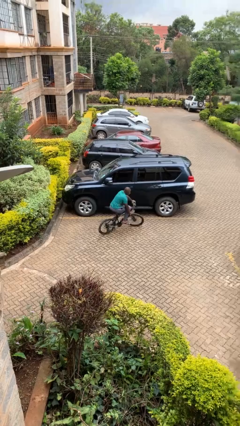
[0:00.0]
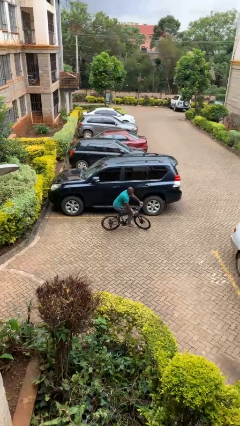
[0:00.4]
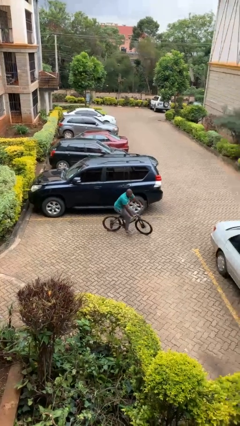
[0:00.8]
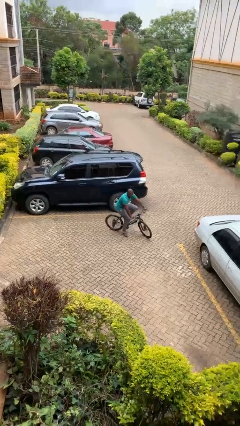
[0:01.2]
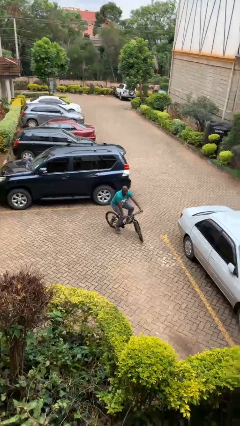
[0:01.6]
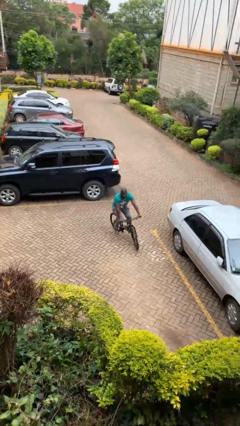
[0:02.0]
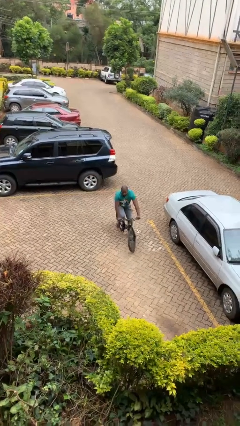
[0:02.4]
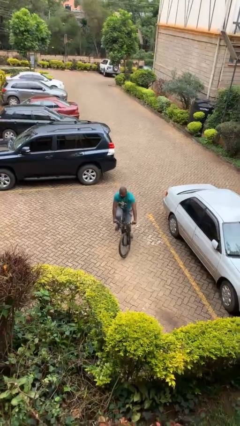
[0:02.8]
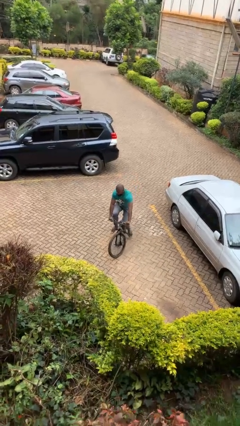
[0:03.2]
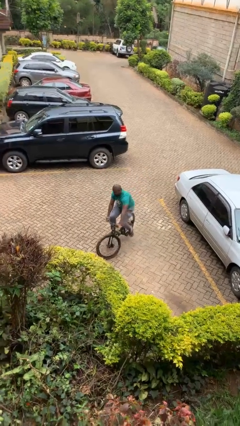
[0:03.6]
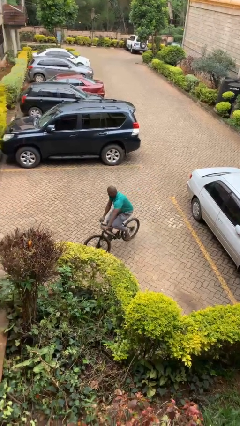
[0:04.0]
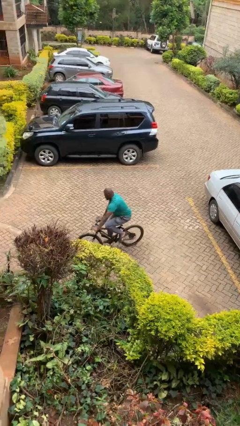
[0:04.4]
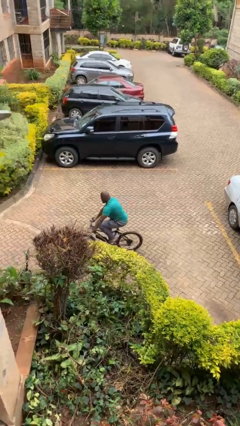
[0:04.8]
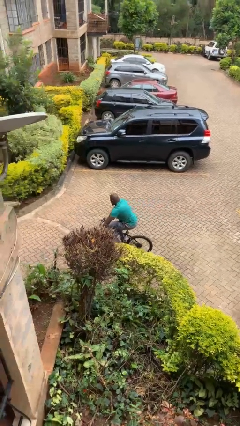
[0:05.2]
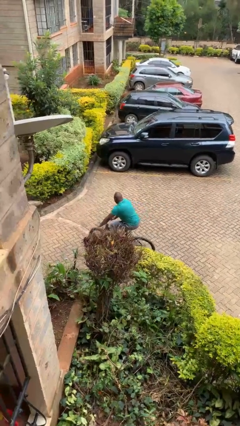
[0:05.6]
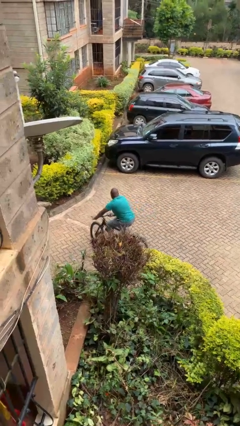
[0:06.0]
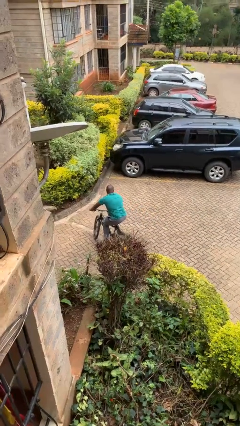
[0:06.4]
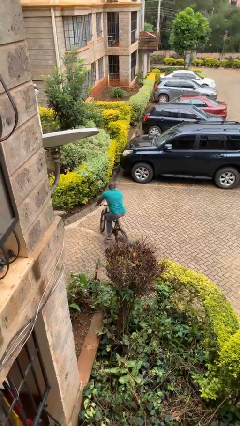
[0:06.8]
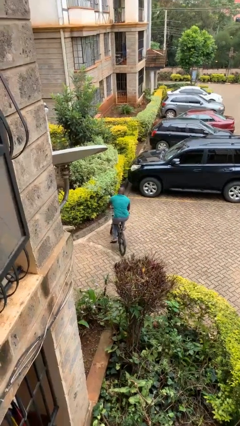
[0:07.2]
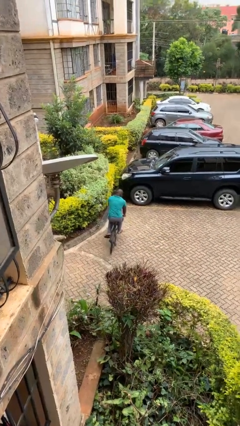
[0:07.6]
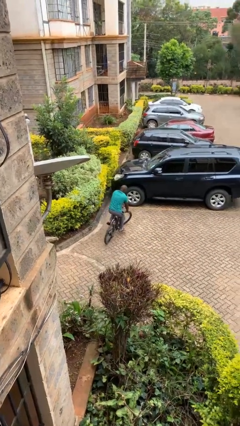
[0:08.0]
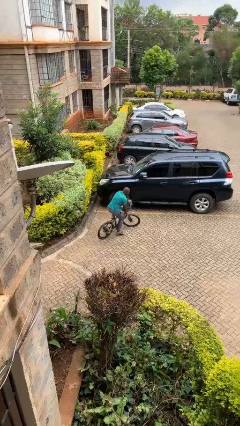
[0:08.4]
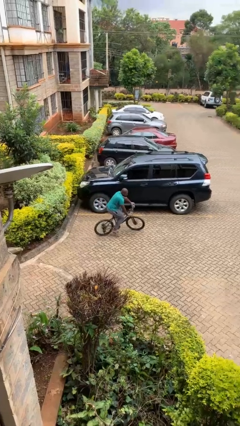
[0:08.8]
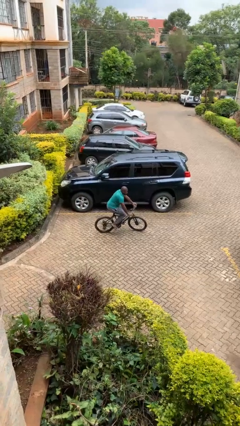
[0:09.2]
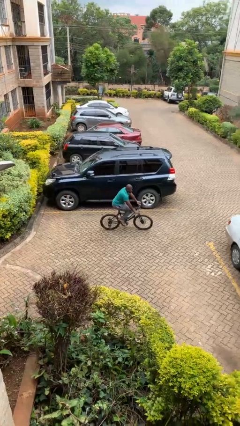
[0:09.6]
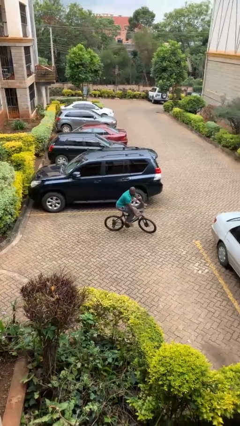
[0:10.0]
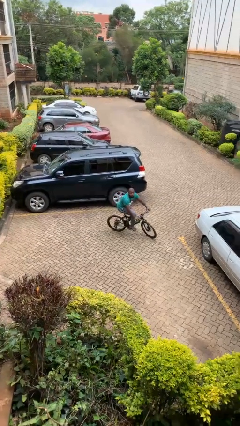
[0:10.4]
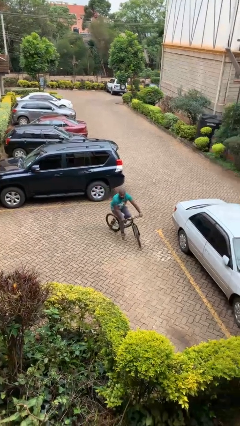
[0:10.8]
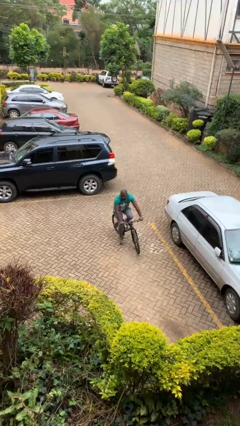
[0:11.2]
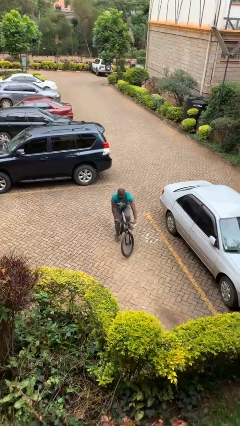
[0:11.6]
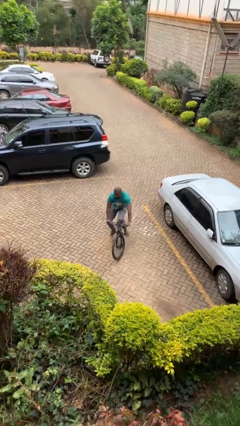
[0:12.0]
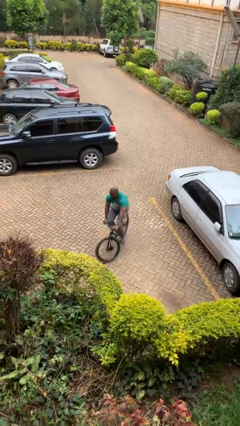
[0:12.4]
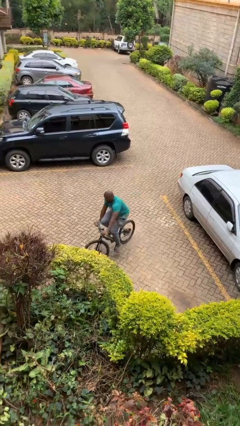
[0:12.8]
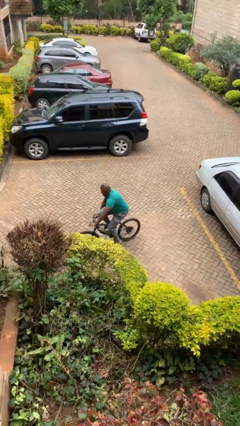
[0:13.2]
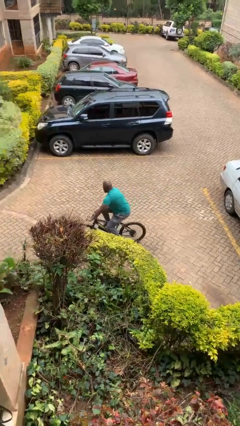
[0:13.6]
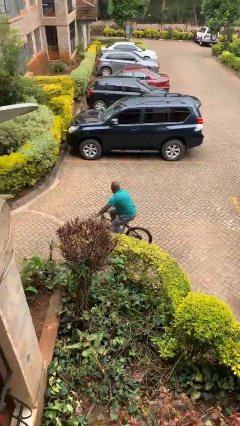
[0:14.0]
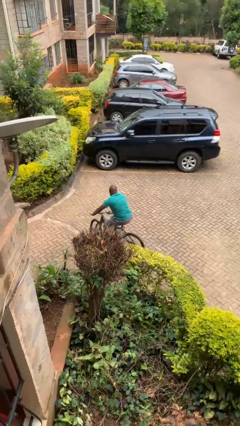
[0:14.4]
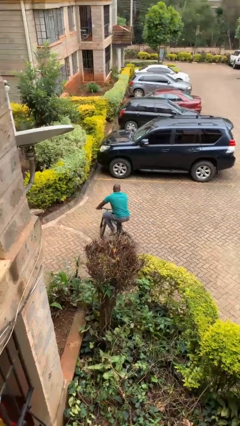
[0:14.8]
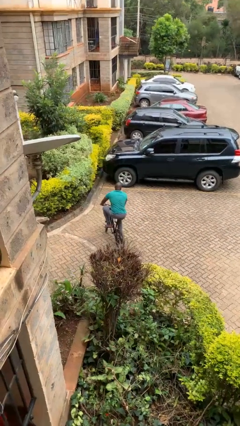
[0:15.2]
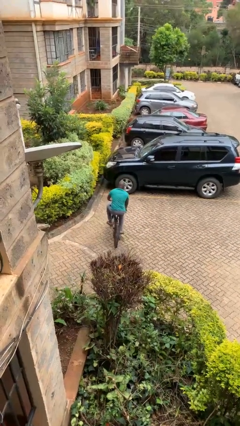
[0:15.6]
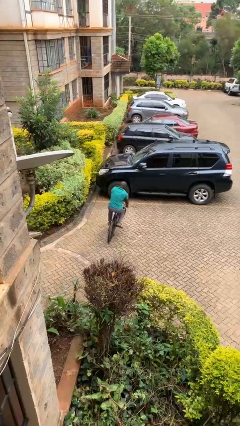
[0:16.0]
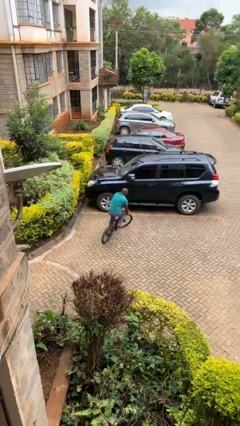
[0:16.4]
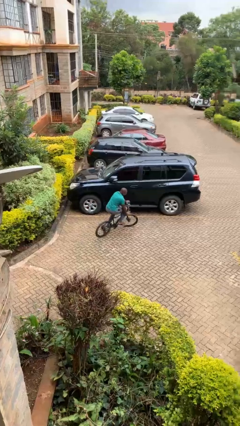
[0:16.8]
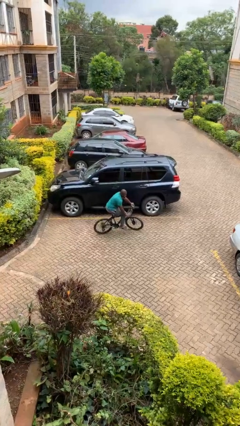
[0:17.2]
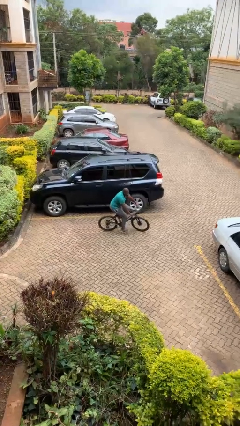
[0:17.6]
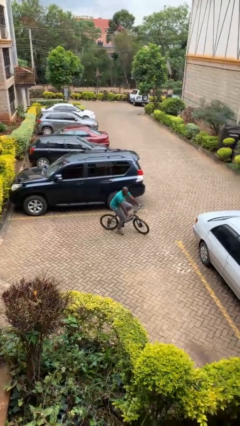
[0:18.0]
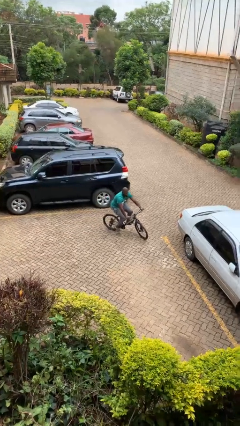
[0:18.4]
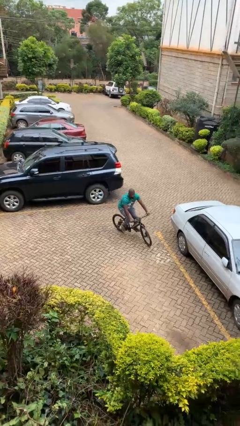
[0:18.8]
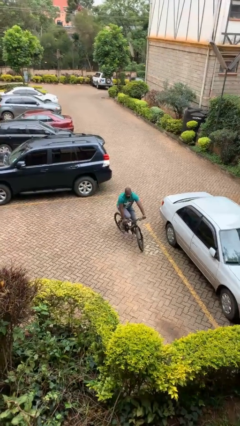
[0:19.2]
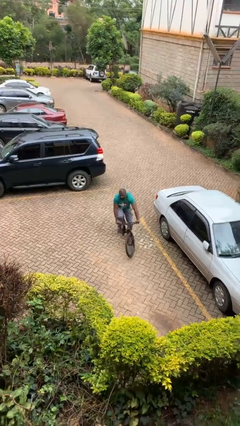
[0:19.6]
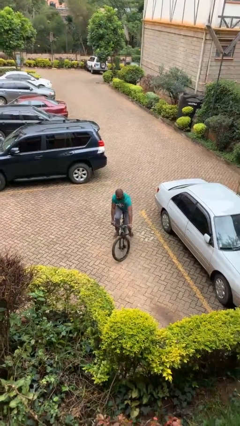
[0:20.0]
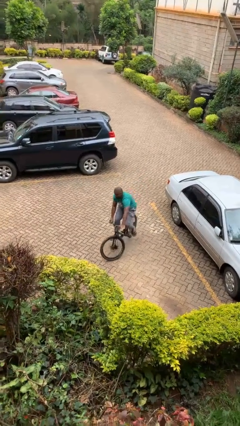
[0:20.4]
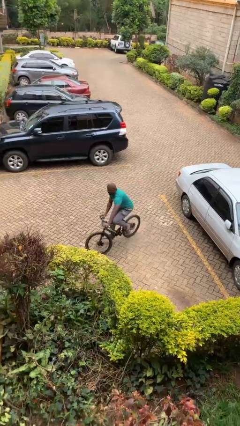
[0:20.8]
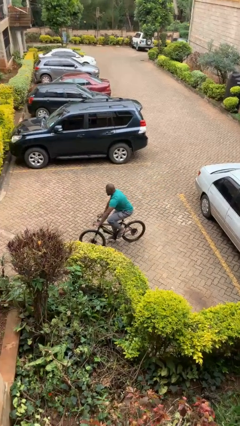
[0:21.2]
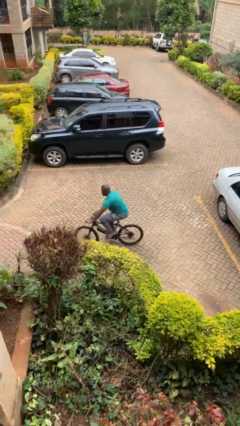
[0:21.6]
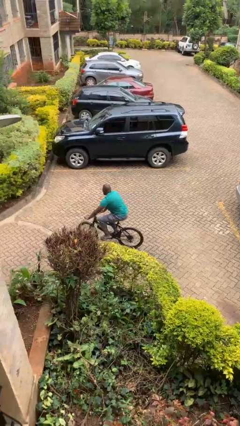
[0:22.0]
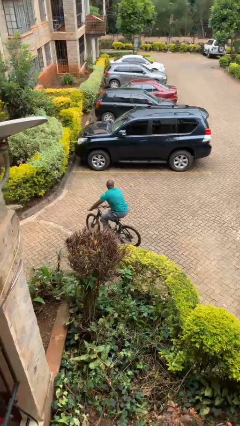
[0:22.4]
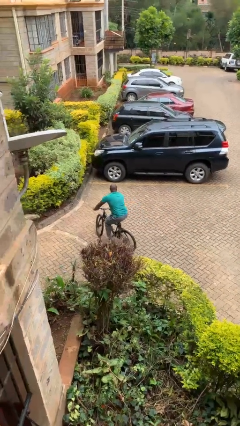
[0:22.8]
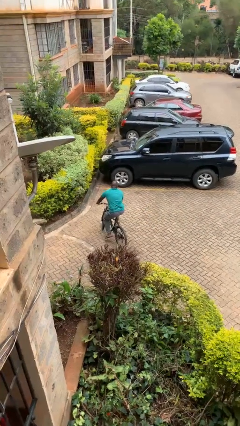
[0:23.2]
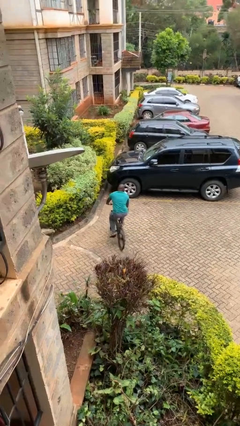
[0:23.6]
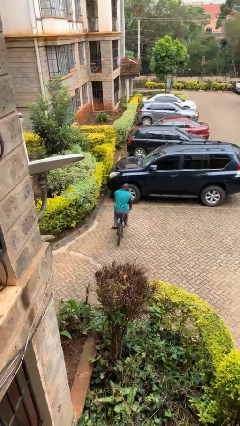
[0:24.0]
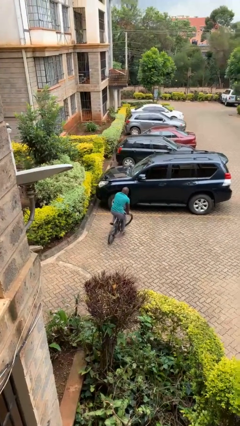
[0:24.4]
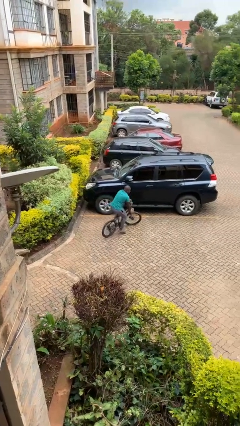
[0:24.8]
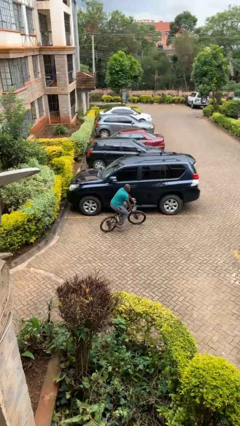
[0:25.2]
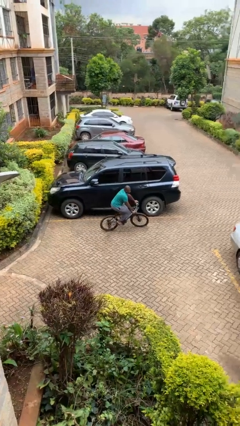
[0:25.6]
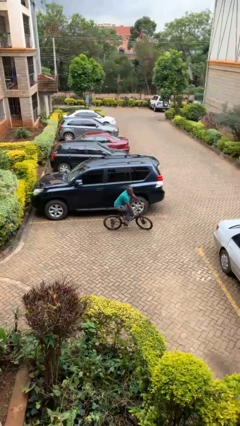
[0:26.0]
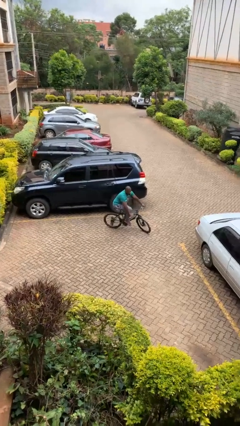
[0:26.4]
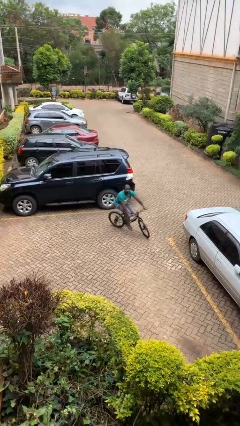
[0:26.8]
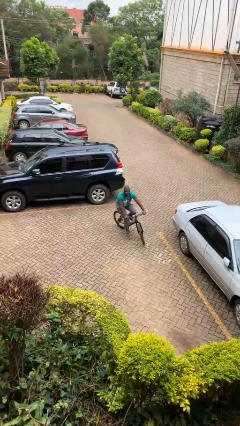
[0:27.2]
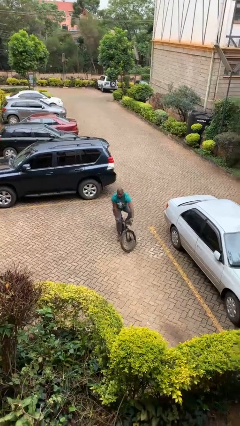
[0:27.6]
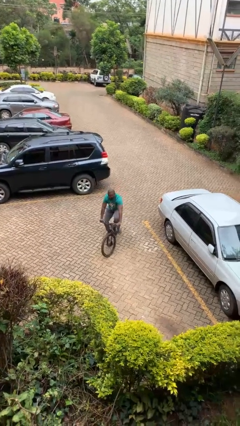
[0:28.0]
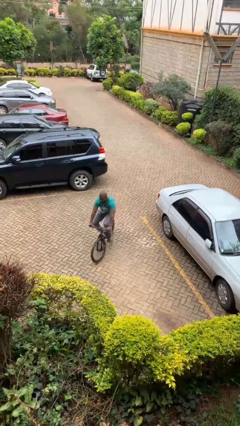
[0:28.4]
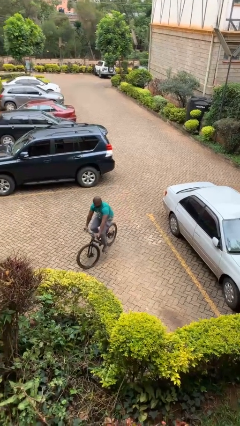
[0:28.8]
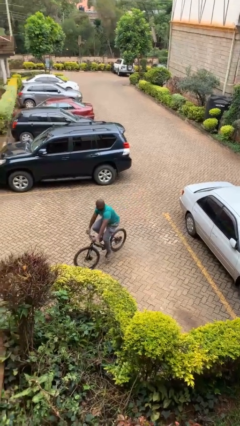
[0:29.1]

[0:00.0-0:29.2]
person rides bicycle

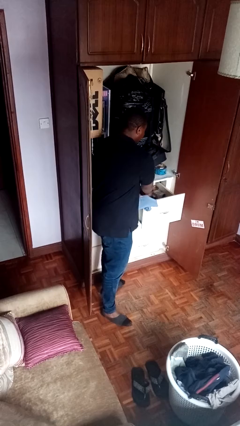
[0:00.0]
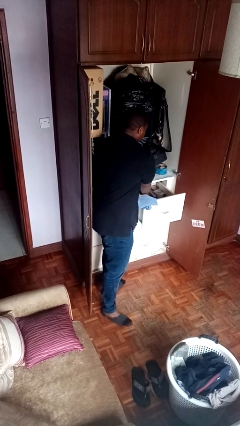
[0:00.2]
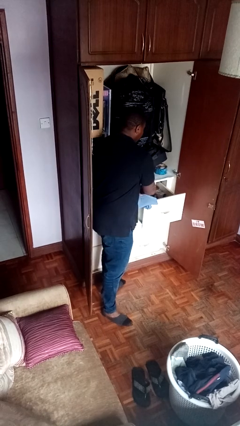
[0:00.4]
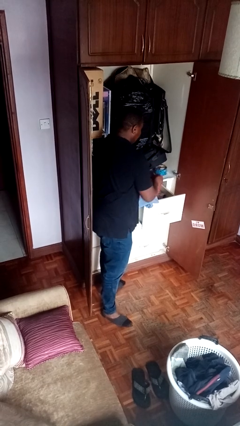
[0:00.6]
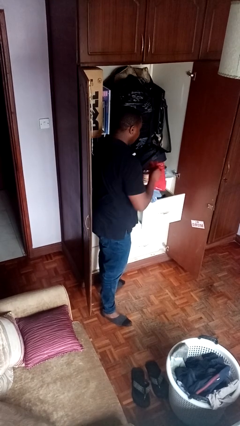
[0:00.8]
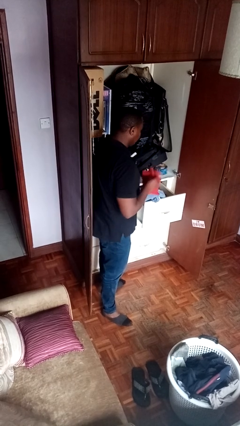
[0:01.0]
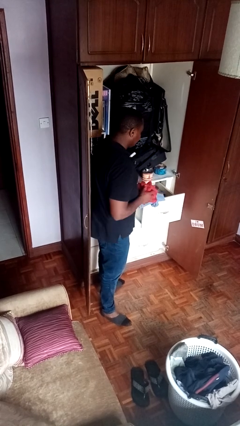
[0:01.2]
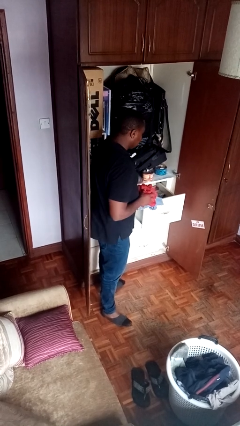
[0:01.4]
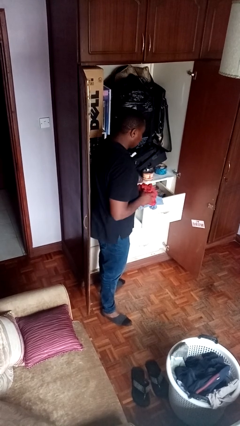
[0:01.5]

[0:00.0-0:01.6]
person takes clothes from dresser

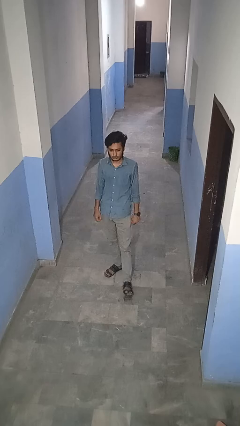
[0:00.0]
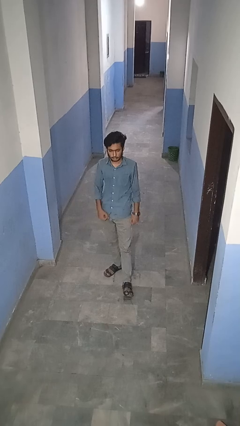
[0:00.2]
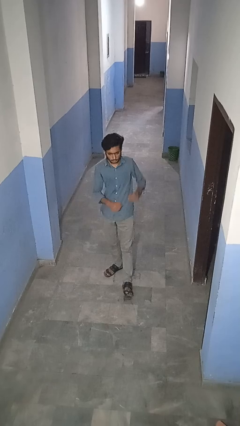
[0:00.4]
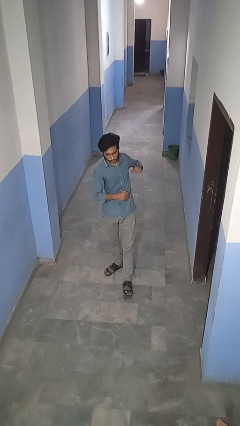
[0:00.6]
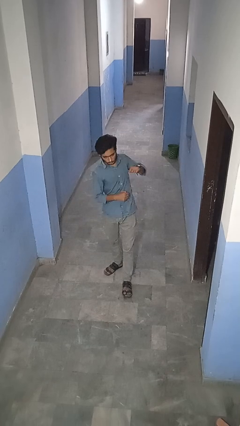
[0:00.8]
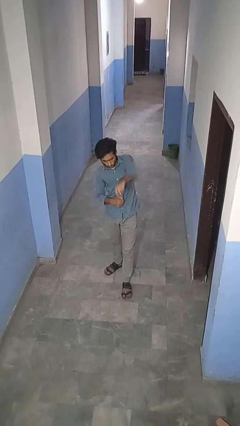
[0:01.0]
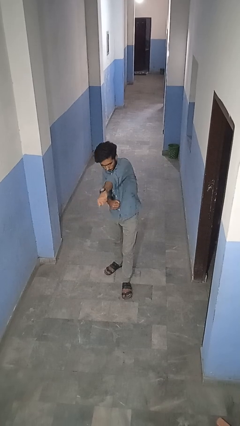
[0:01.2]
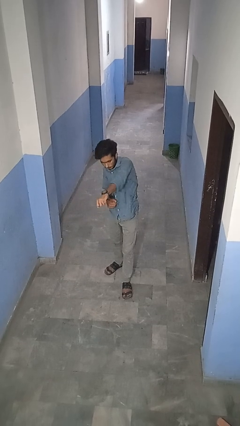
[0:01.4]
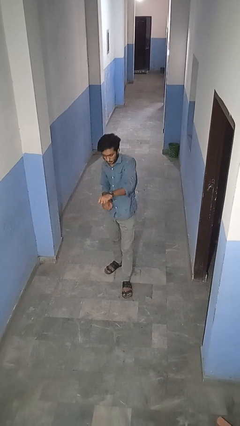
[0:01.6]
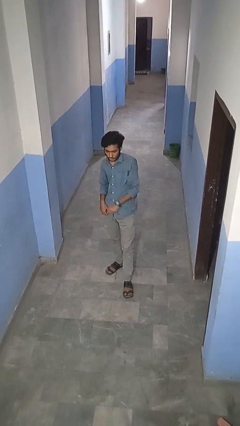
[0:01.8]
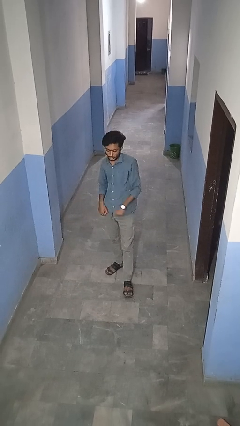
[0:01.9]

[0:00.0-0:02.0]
person punches
